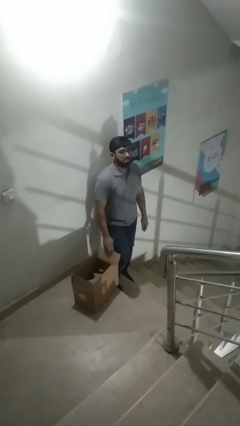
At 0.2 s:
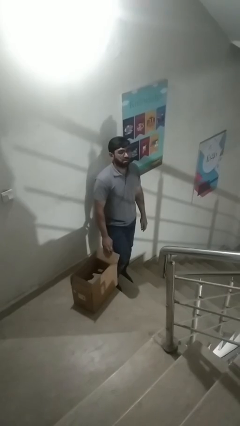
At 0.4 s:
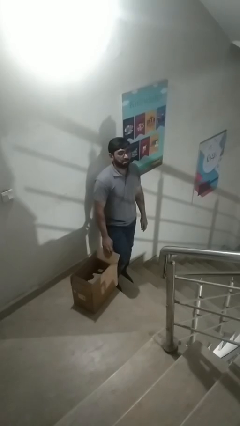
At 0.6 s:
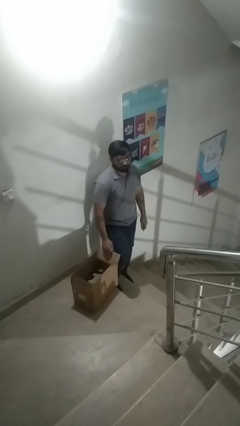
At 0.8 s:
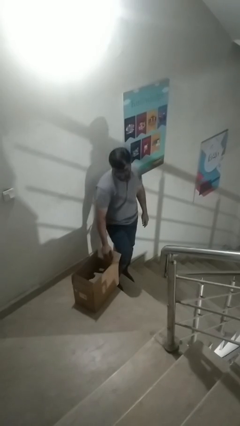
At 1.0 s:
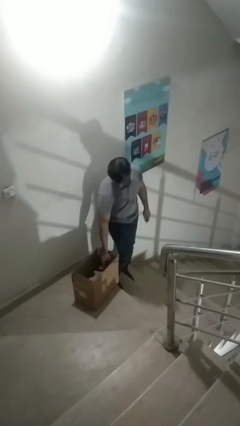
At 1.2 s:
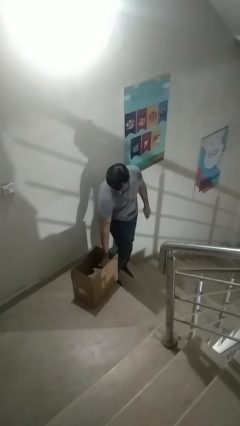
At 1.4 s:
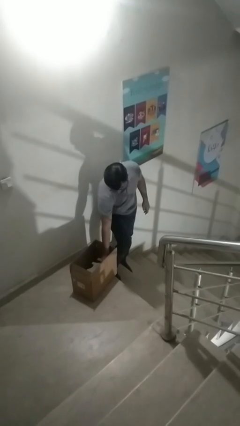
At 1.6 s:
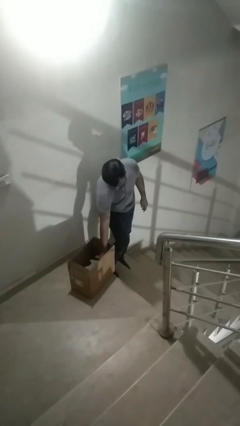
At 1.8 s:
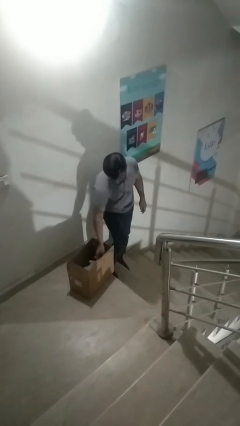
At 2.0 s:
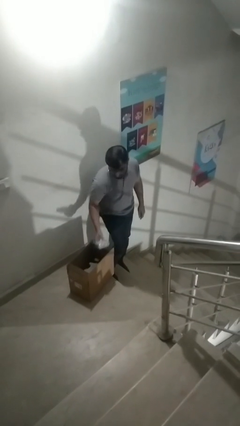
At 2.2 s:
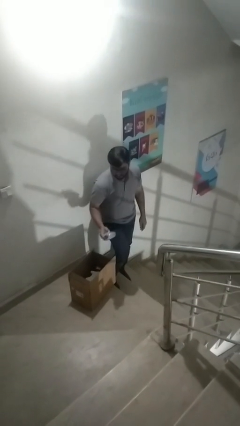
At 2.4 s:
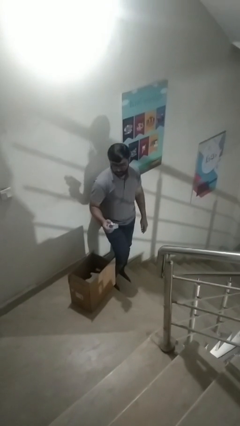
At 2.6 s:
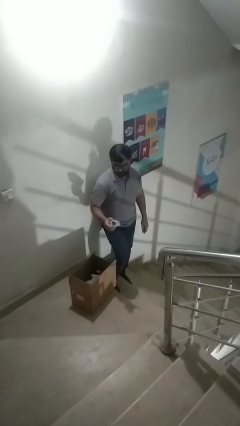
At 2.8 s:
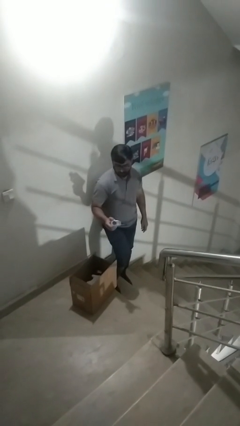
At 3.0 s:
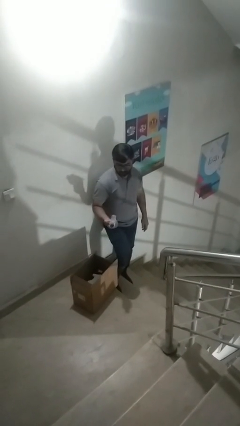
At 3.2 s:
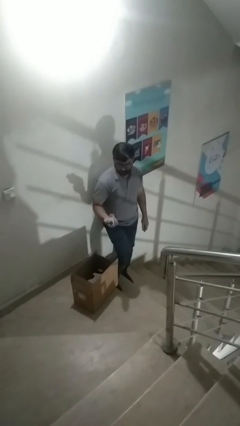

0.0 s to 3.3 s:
person takes object from box

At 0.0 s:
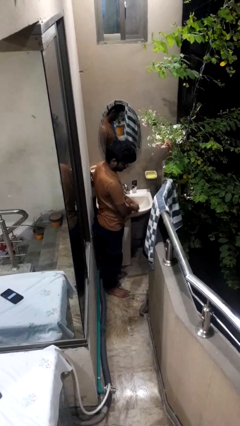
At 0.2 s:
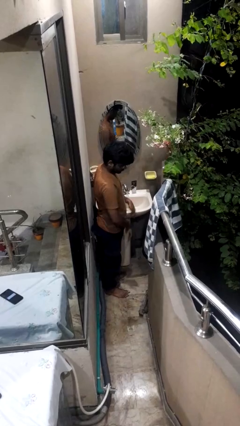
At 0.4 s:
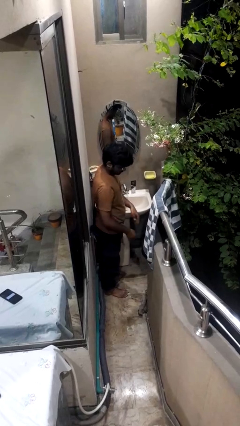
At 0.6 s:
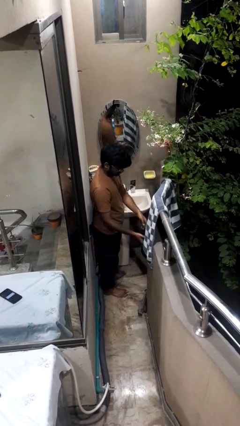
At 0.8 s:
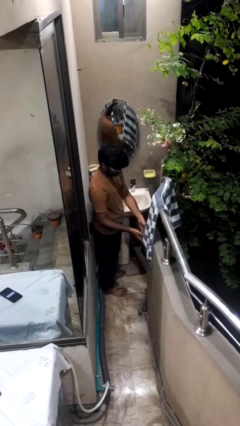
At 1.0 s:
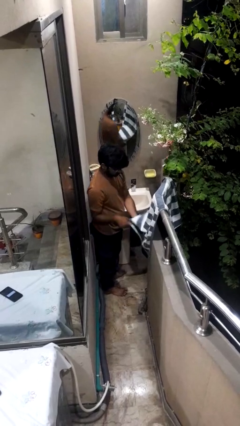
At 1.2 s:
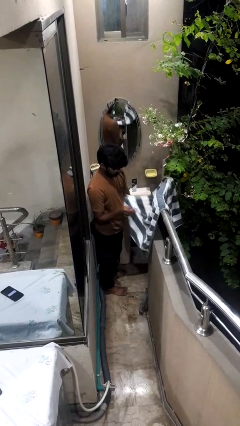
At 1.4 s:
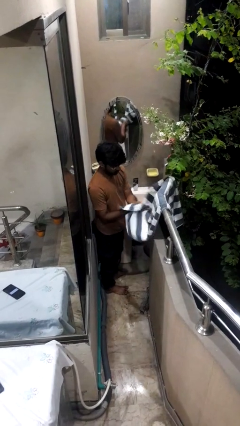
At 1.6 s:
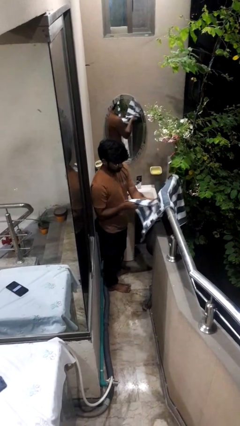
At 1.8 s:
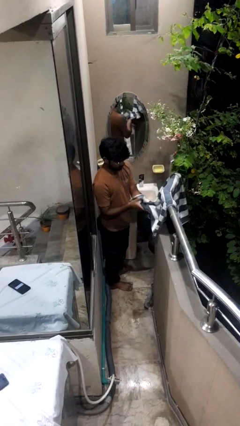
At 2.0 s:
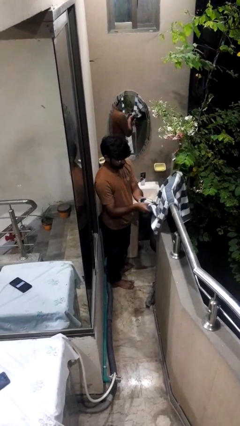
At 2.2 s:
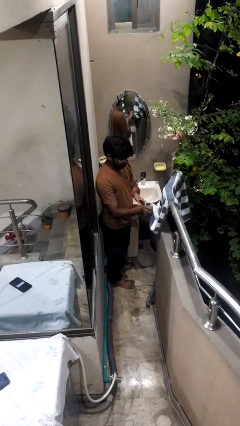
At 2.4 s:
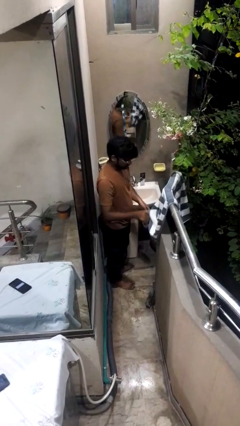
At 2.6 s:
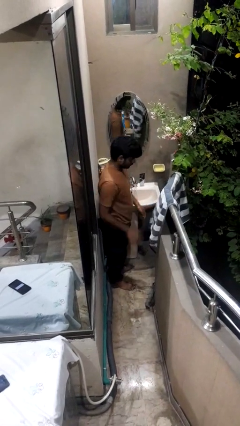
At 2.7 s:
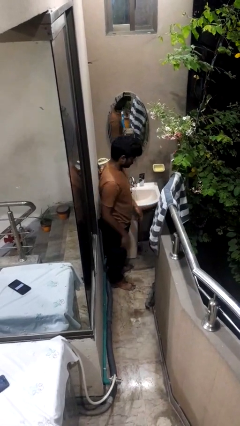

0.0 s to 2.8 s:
person dries hands with towel

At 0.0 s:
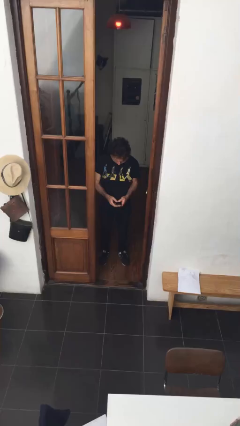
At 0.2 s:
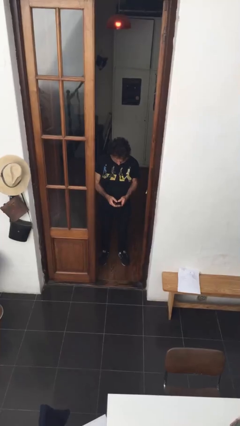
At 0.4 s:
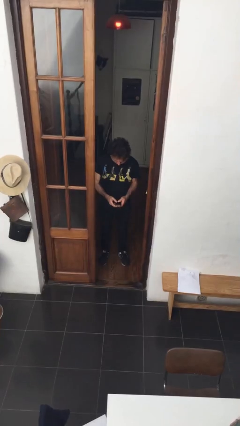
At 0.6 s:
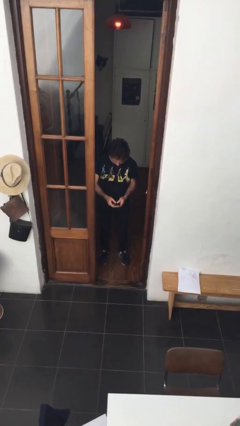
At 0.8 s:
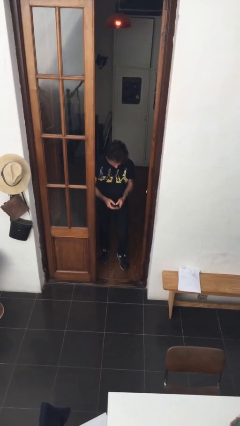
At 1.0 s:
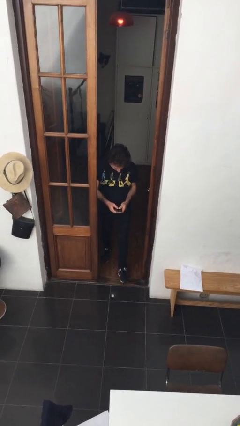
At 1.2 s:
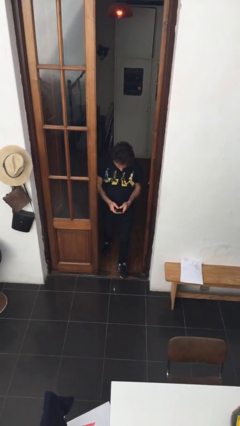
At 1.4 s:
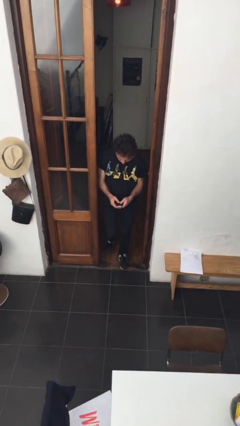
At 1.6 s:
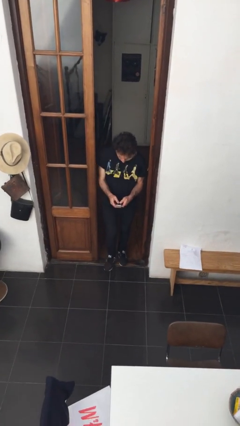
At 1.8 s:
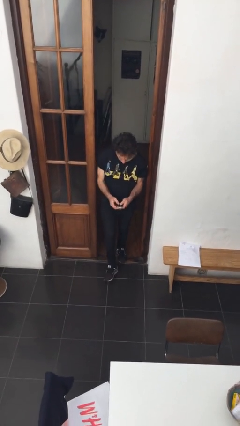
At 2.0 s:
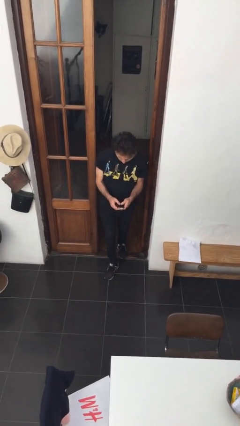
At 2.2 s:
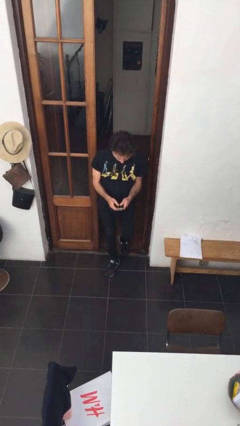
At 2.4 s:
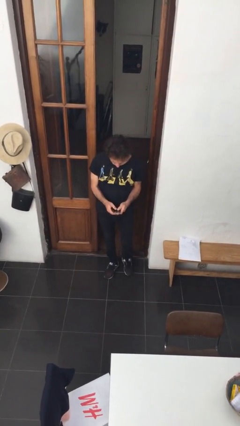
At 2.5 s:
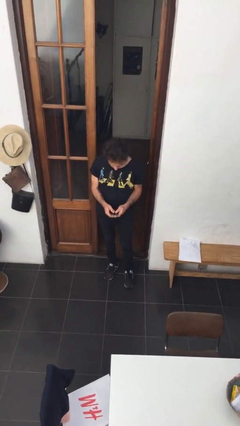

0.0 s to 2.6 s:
person enters scene through structure

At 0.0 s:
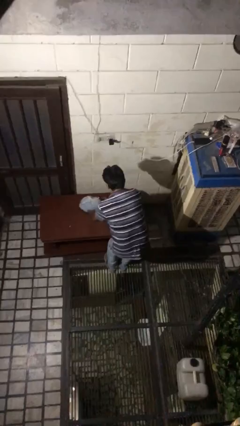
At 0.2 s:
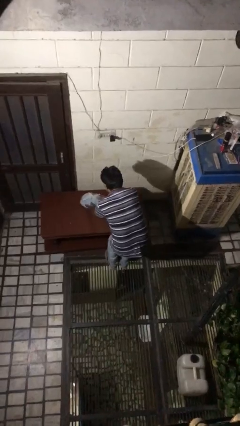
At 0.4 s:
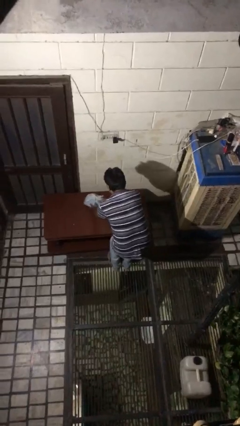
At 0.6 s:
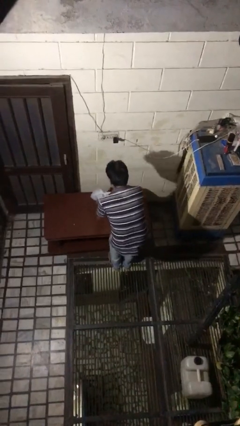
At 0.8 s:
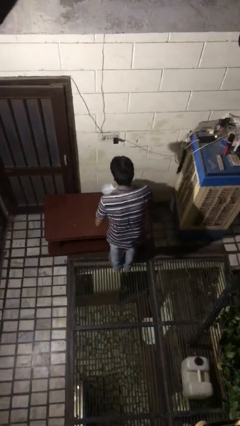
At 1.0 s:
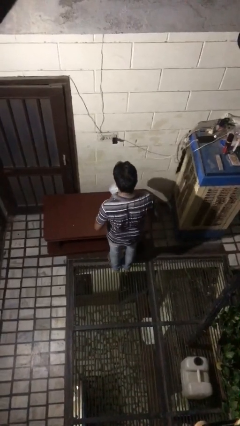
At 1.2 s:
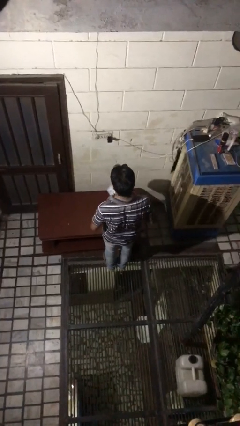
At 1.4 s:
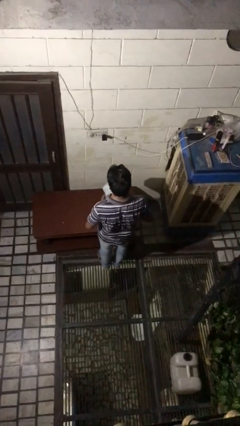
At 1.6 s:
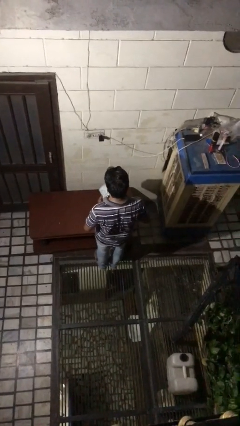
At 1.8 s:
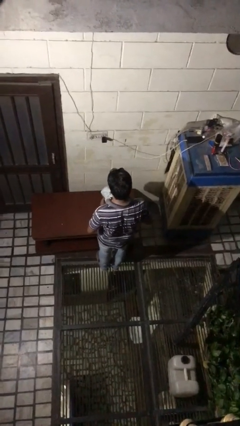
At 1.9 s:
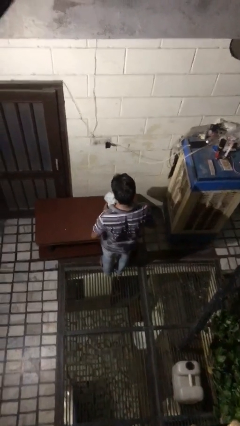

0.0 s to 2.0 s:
person picks up object from table

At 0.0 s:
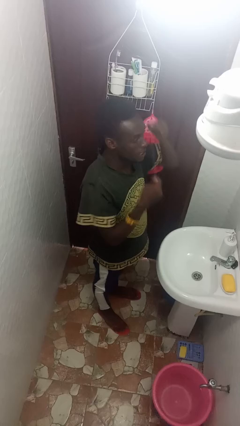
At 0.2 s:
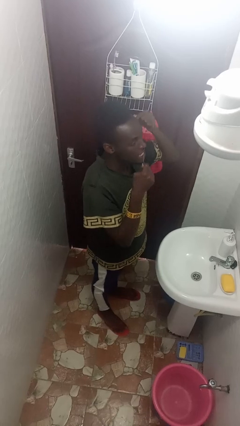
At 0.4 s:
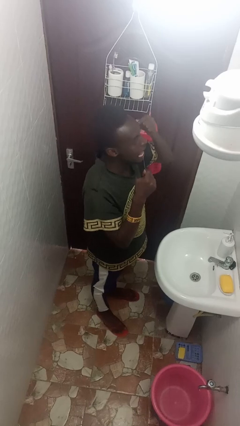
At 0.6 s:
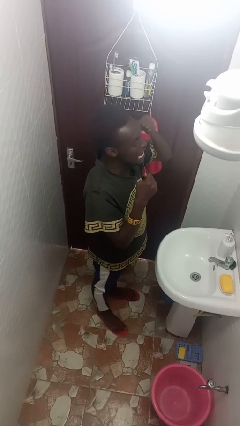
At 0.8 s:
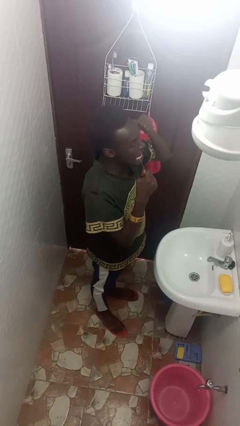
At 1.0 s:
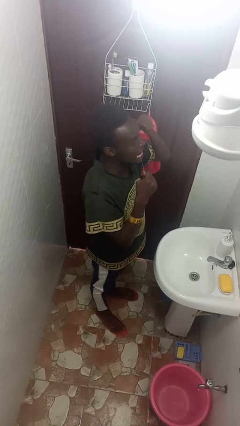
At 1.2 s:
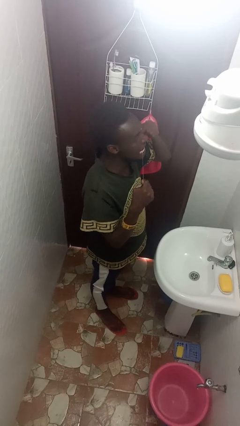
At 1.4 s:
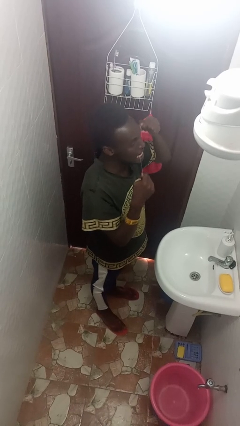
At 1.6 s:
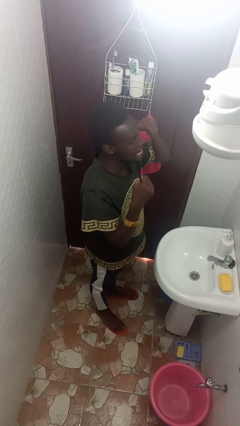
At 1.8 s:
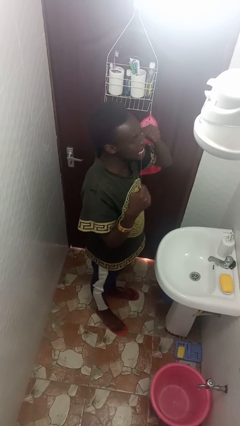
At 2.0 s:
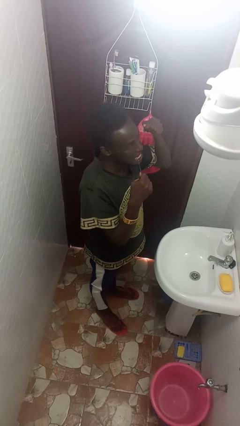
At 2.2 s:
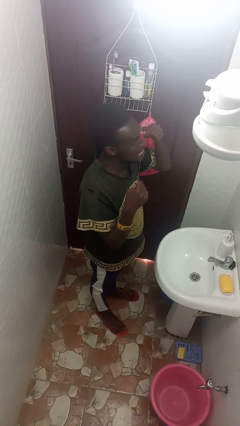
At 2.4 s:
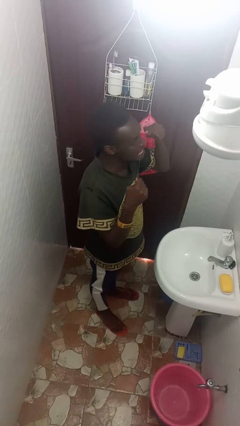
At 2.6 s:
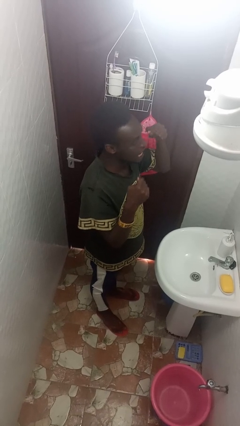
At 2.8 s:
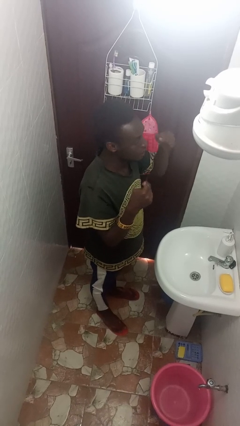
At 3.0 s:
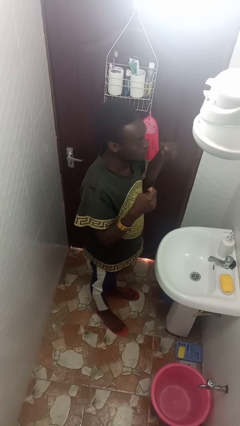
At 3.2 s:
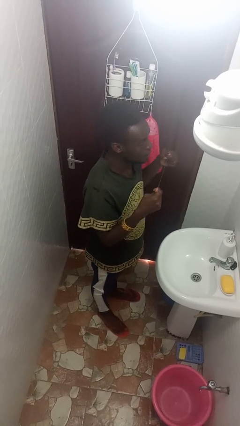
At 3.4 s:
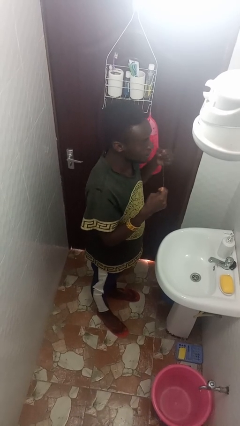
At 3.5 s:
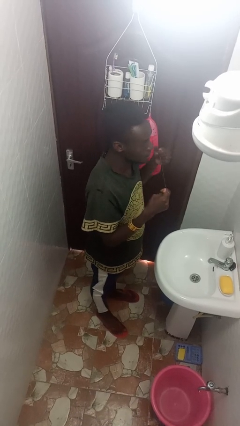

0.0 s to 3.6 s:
person flosses

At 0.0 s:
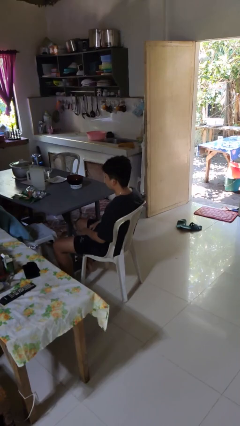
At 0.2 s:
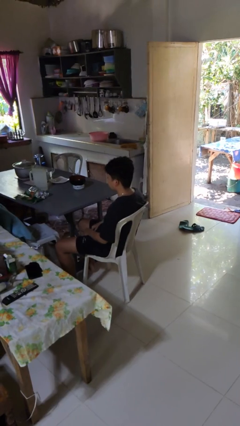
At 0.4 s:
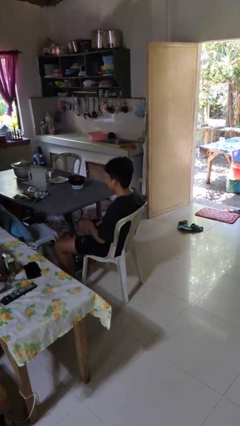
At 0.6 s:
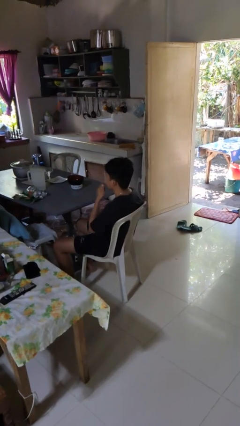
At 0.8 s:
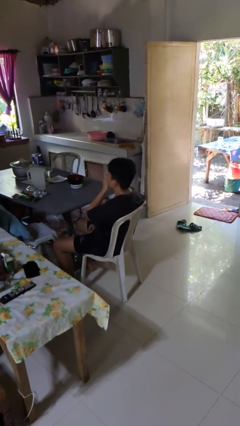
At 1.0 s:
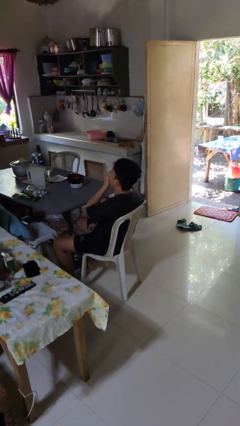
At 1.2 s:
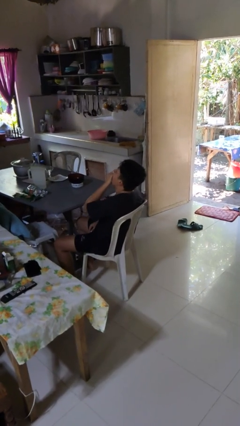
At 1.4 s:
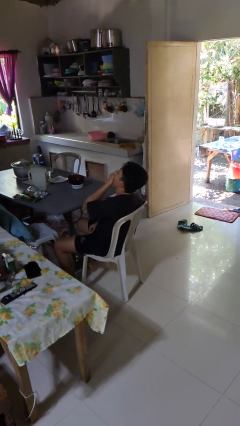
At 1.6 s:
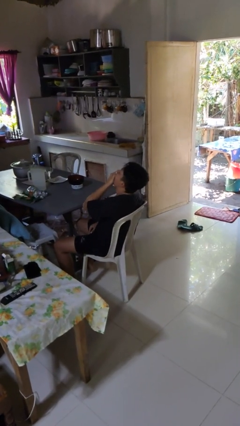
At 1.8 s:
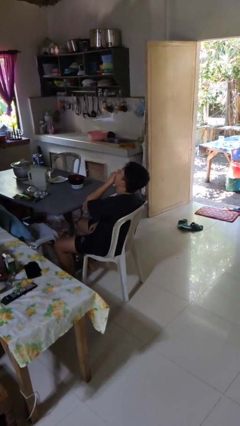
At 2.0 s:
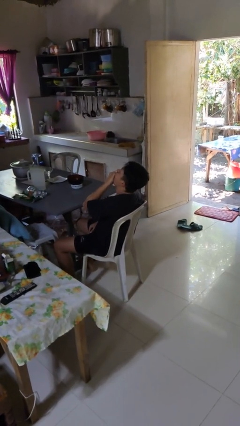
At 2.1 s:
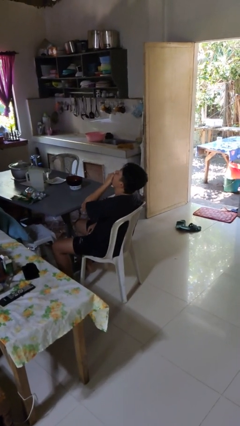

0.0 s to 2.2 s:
person yawns

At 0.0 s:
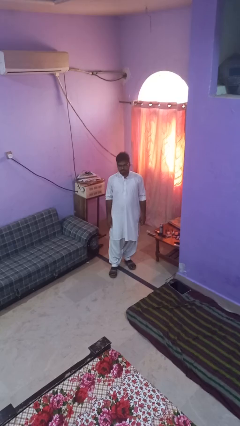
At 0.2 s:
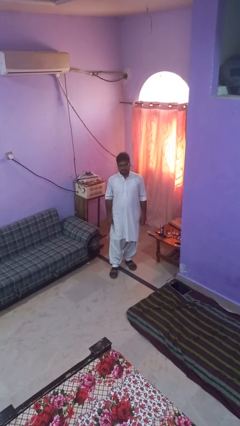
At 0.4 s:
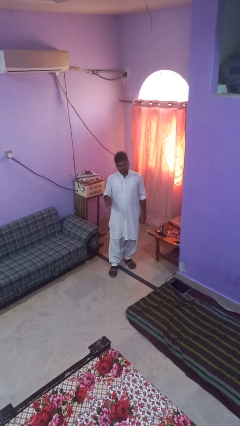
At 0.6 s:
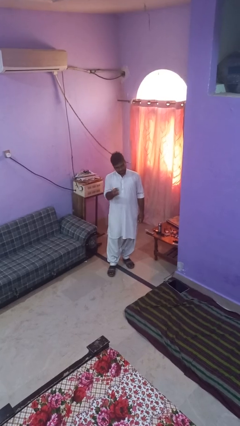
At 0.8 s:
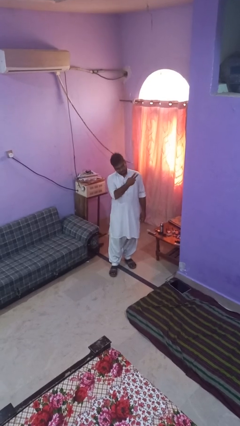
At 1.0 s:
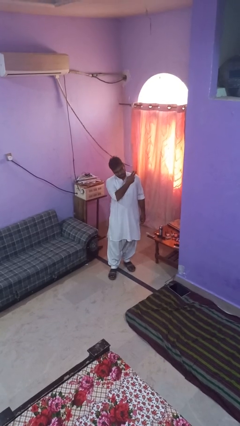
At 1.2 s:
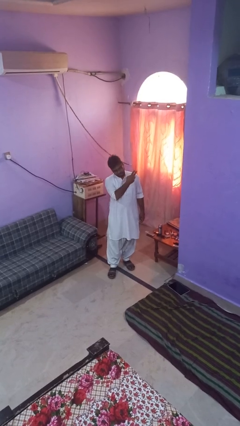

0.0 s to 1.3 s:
person gestures swipe left
